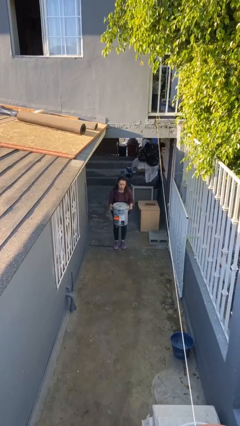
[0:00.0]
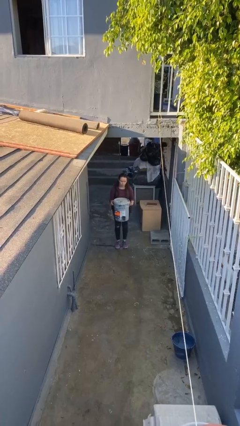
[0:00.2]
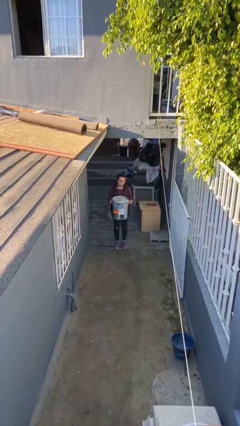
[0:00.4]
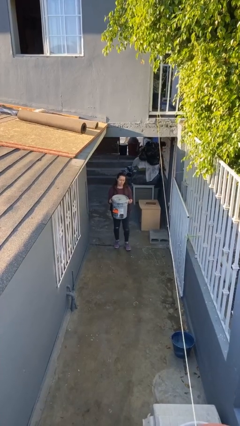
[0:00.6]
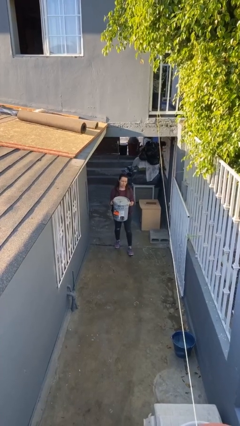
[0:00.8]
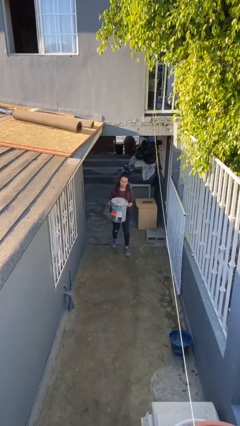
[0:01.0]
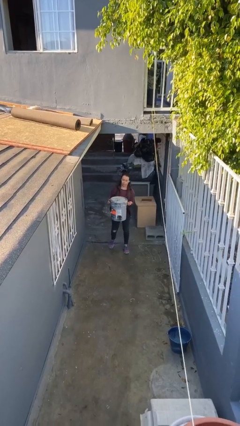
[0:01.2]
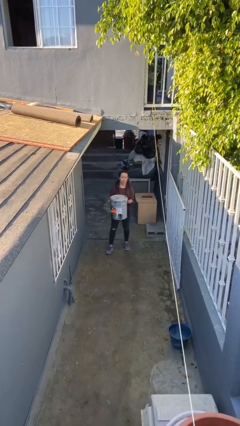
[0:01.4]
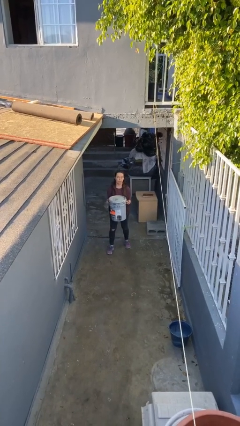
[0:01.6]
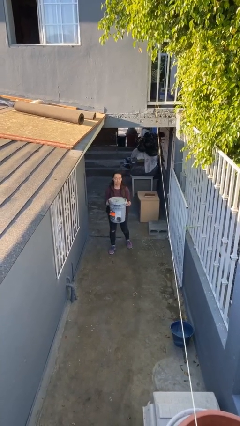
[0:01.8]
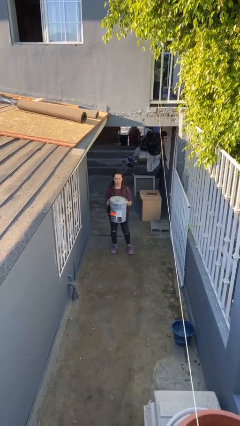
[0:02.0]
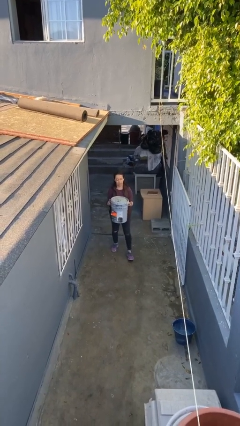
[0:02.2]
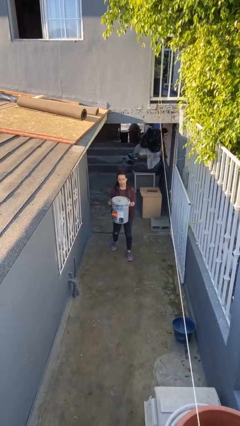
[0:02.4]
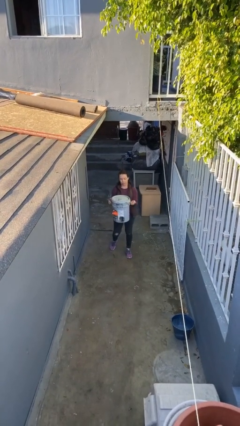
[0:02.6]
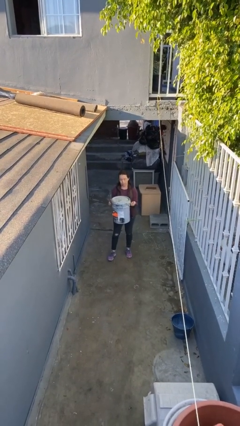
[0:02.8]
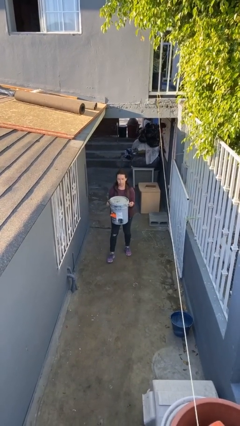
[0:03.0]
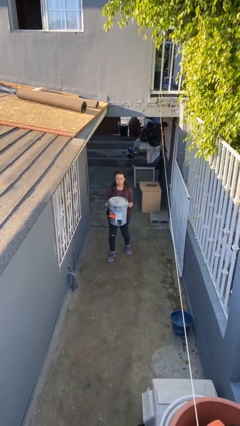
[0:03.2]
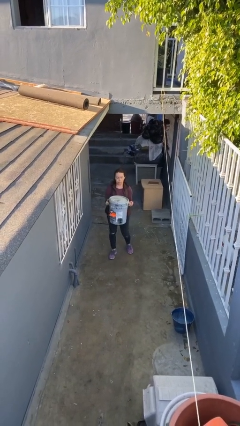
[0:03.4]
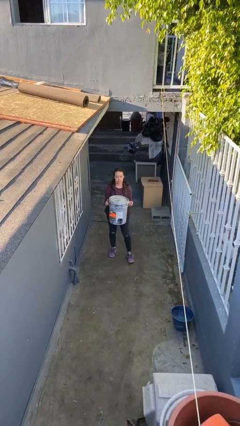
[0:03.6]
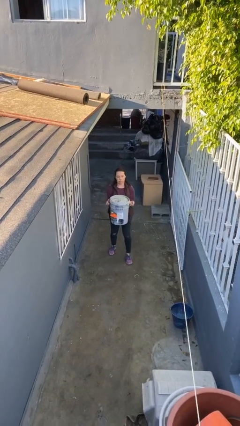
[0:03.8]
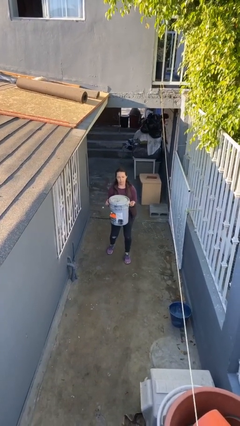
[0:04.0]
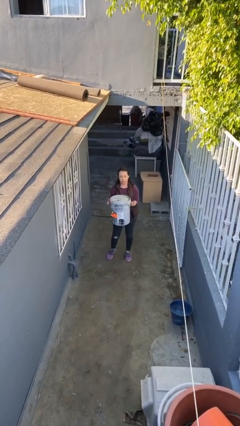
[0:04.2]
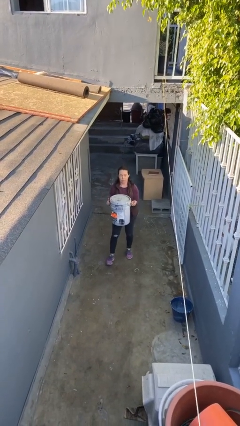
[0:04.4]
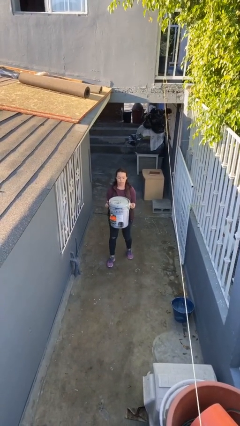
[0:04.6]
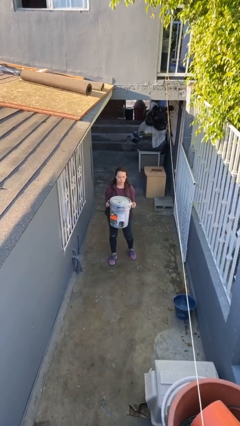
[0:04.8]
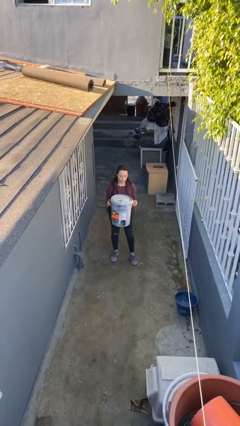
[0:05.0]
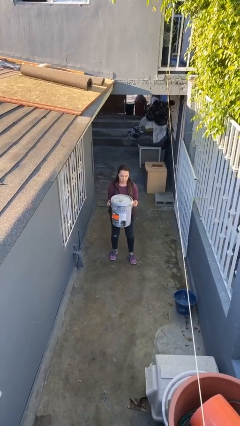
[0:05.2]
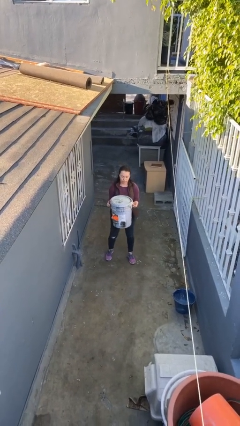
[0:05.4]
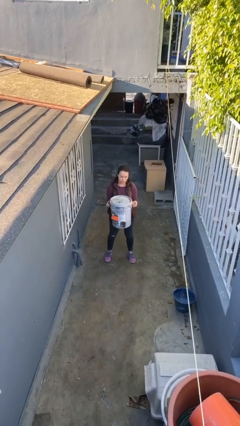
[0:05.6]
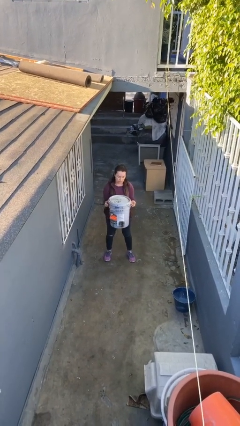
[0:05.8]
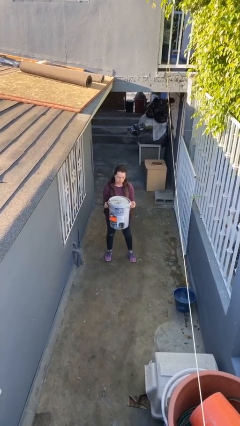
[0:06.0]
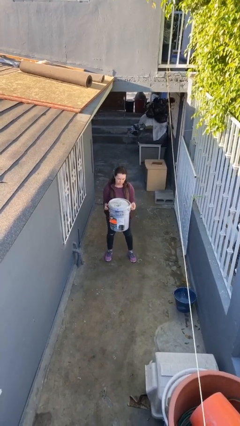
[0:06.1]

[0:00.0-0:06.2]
person carries heavy object

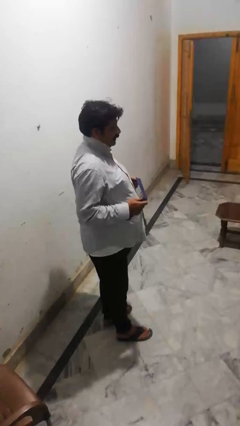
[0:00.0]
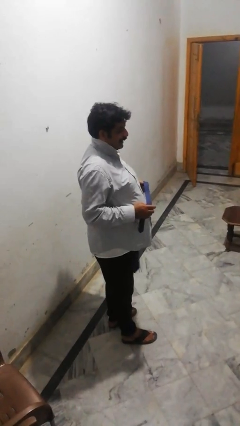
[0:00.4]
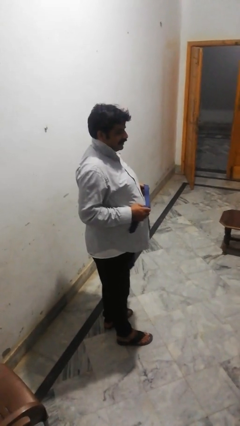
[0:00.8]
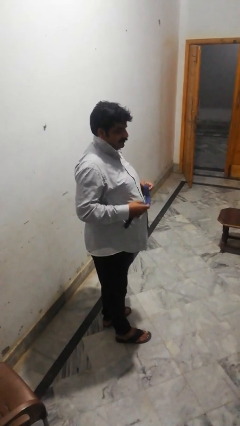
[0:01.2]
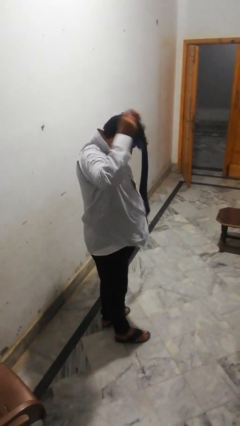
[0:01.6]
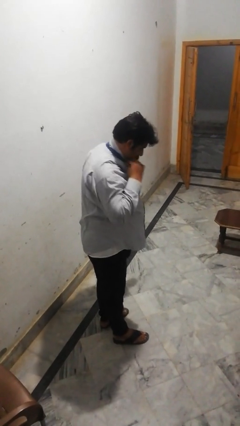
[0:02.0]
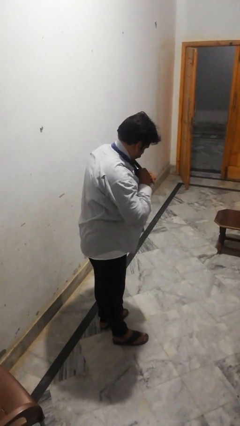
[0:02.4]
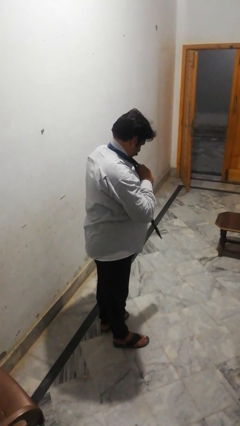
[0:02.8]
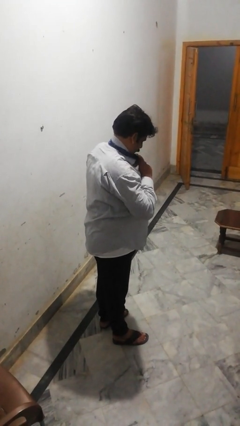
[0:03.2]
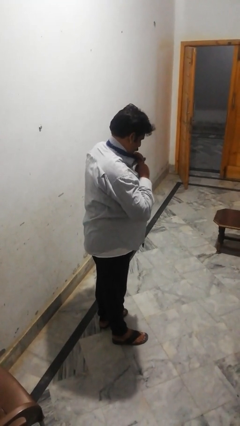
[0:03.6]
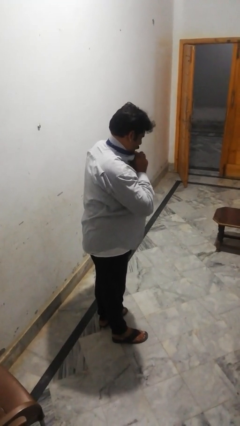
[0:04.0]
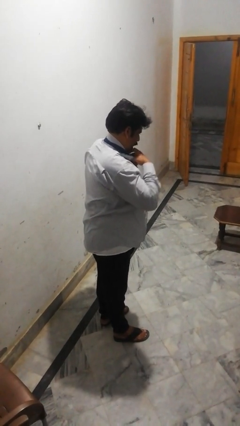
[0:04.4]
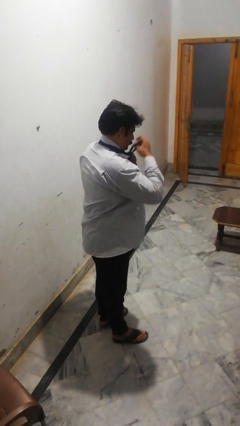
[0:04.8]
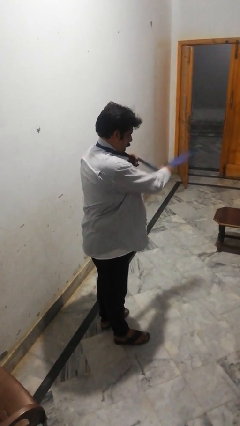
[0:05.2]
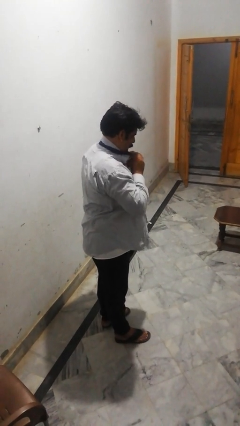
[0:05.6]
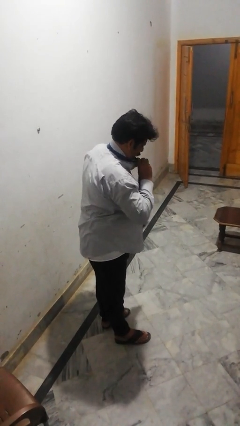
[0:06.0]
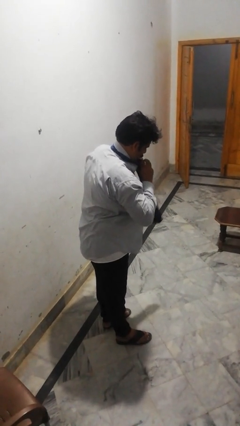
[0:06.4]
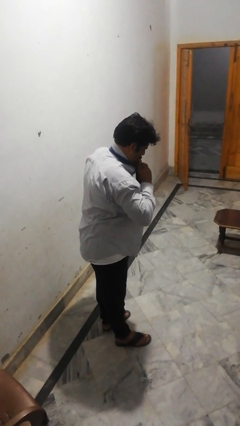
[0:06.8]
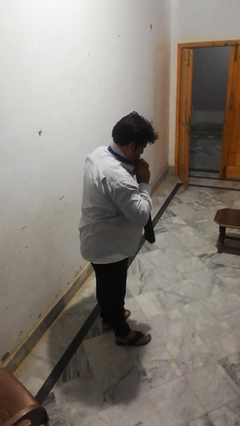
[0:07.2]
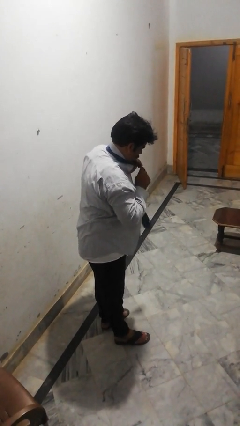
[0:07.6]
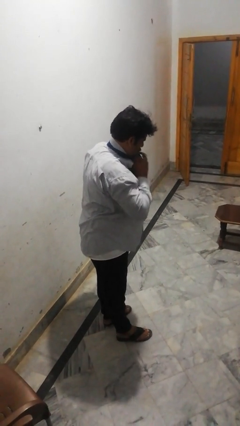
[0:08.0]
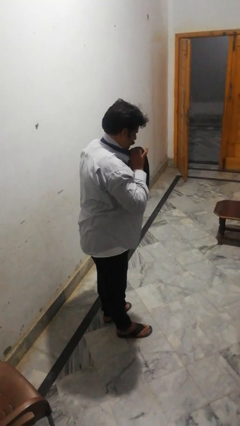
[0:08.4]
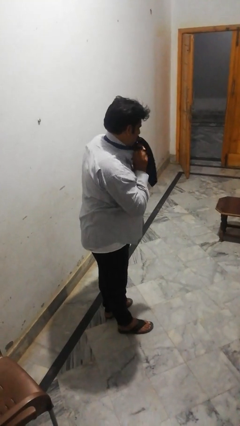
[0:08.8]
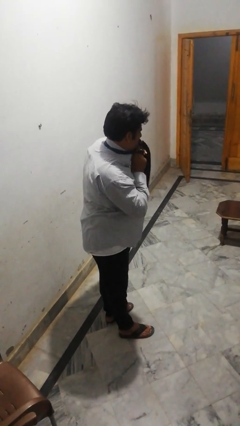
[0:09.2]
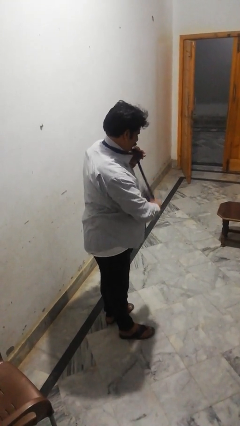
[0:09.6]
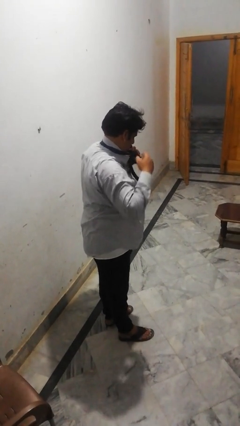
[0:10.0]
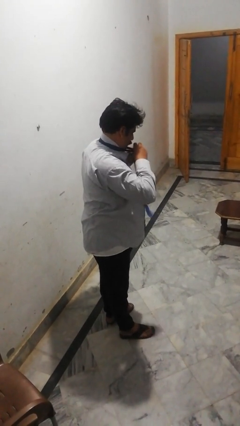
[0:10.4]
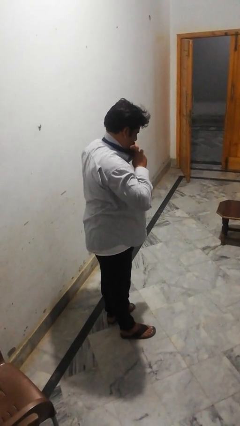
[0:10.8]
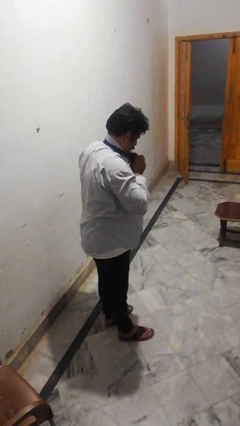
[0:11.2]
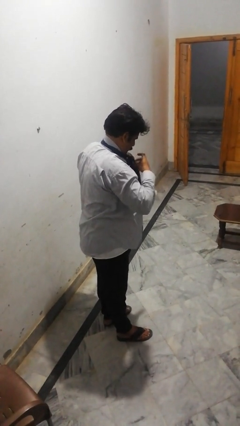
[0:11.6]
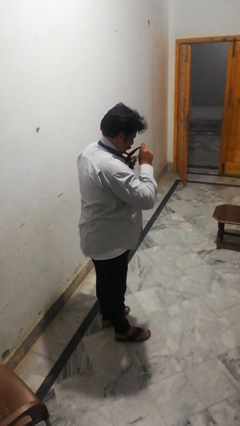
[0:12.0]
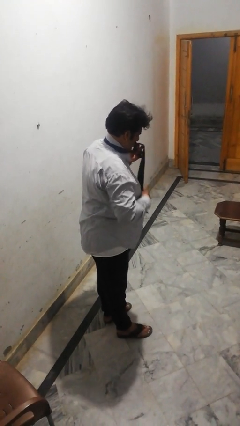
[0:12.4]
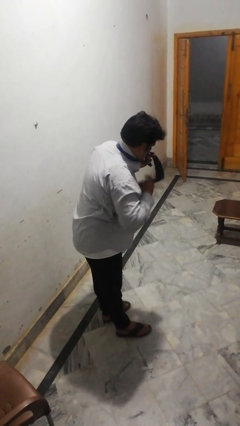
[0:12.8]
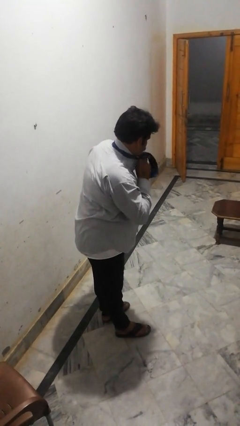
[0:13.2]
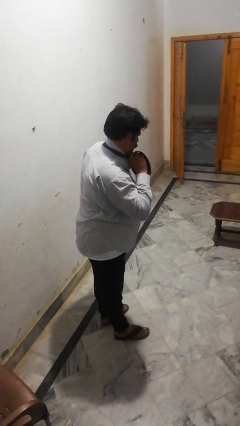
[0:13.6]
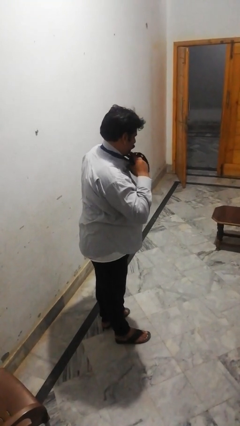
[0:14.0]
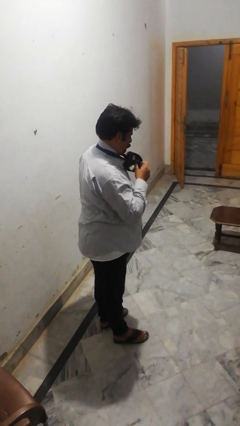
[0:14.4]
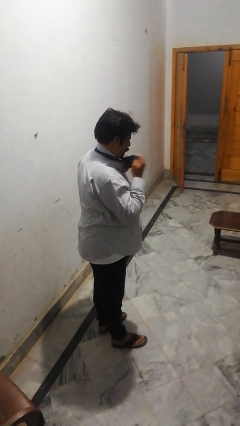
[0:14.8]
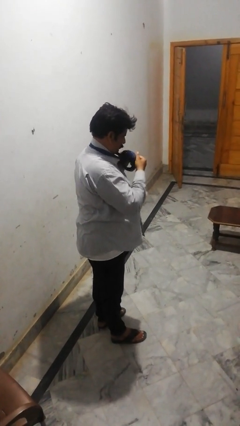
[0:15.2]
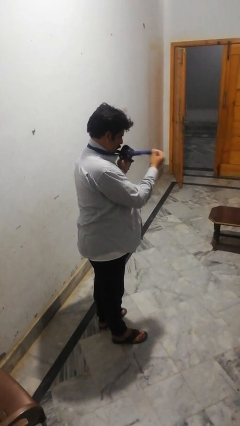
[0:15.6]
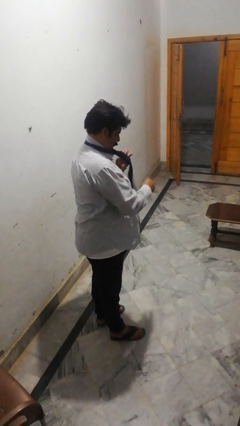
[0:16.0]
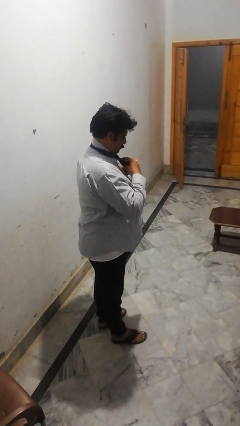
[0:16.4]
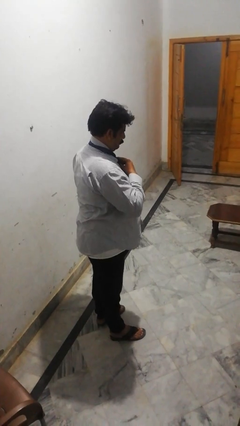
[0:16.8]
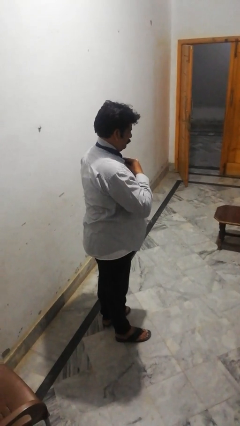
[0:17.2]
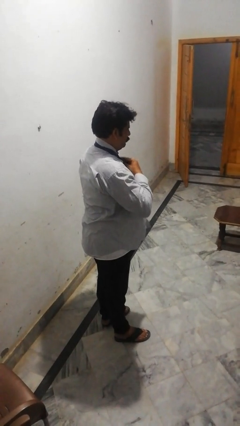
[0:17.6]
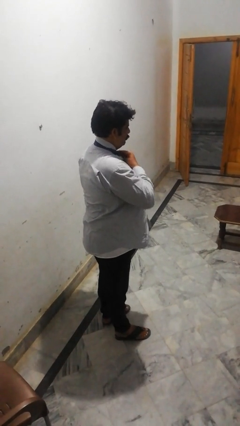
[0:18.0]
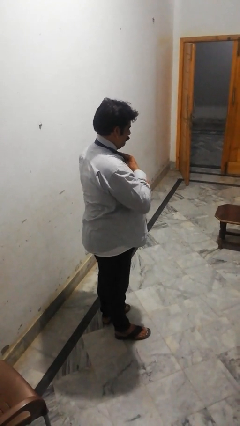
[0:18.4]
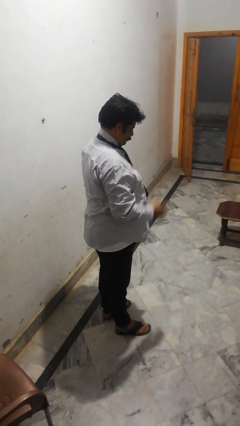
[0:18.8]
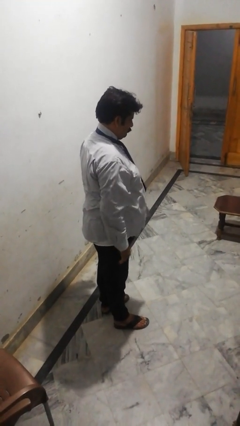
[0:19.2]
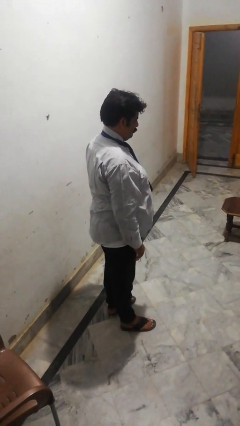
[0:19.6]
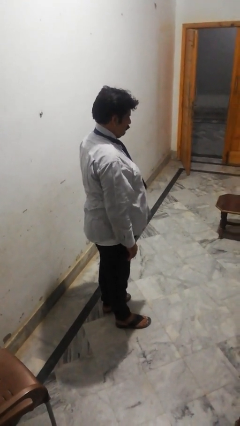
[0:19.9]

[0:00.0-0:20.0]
person puts on necktie

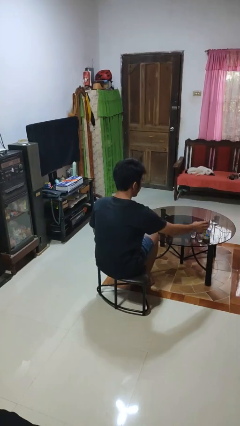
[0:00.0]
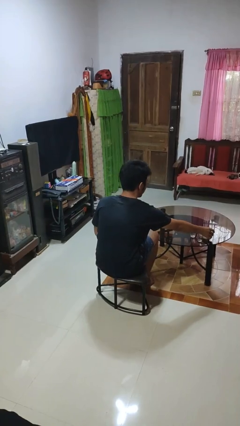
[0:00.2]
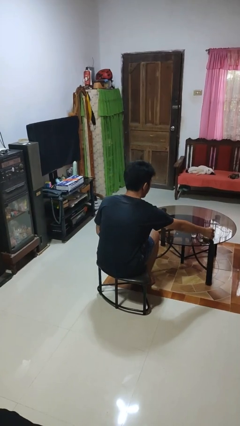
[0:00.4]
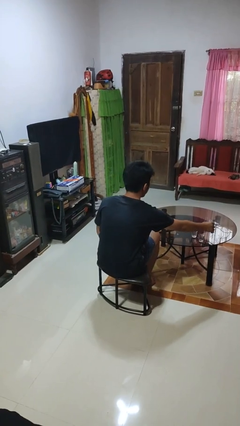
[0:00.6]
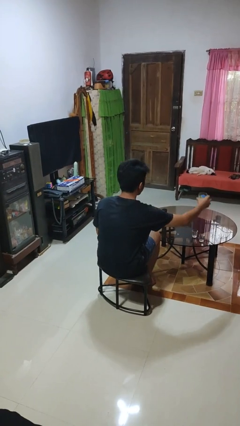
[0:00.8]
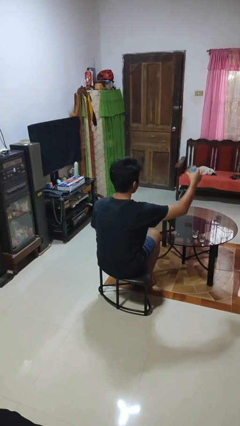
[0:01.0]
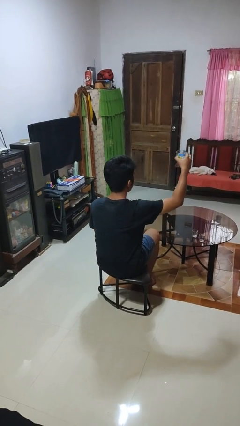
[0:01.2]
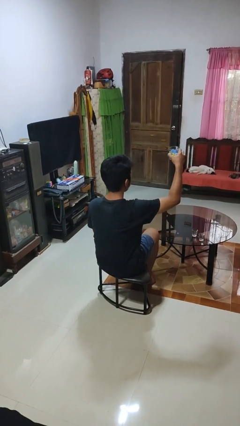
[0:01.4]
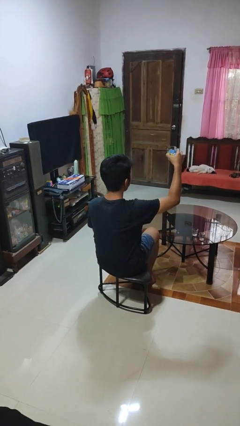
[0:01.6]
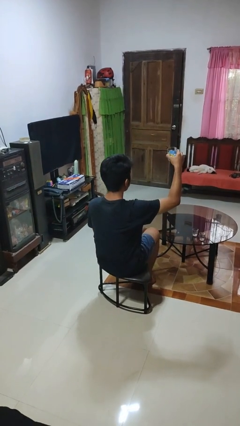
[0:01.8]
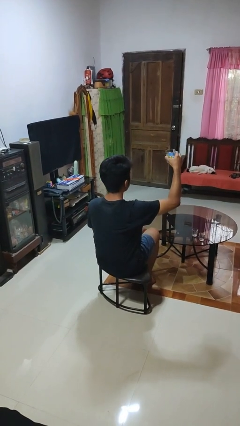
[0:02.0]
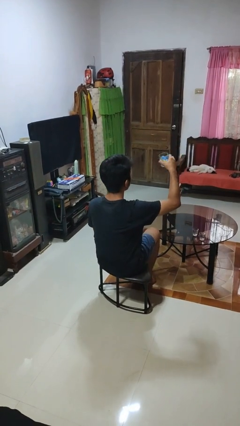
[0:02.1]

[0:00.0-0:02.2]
person picks up object from table
